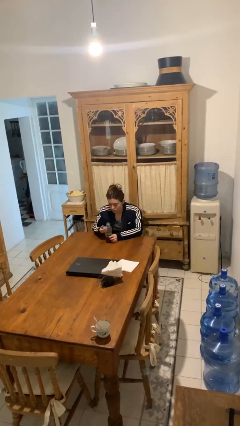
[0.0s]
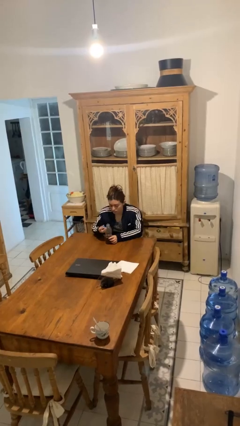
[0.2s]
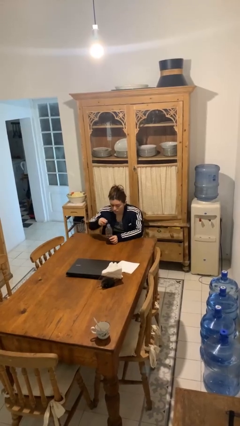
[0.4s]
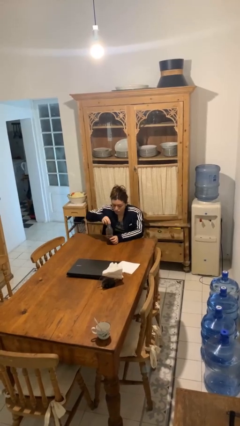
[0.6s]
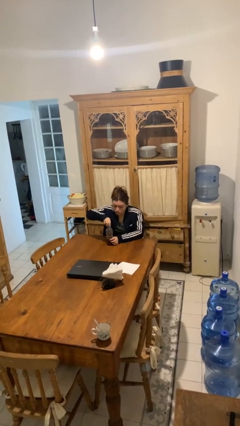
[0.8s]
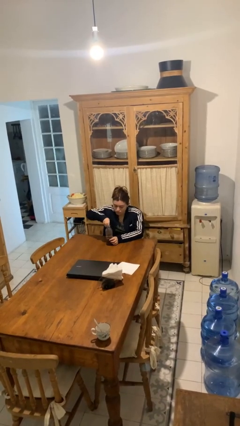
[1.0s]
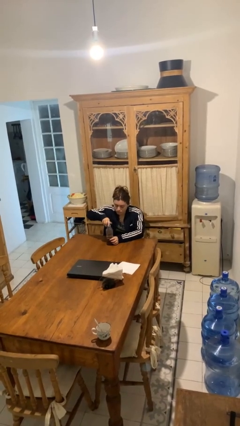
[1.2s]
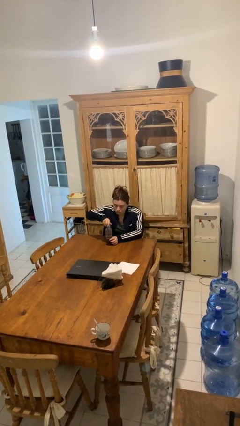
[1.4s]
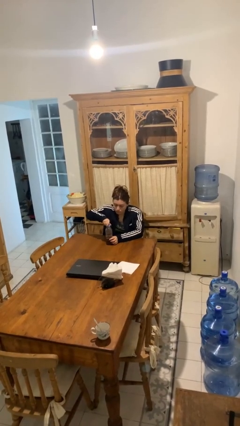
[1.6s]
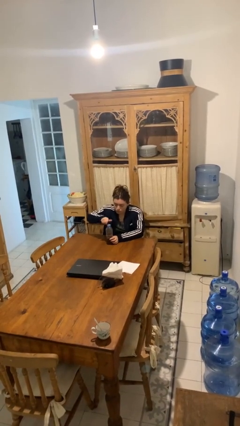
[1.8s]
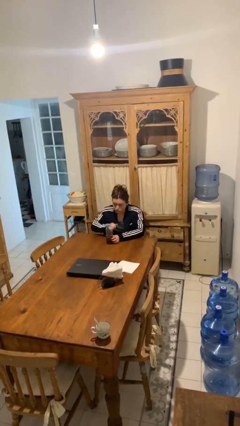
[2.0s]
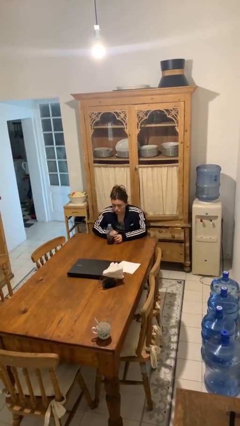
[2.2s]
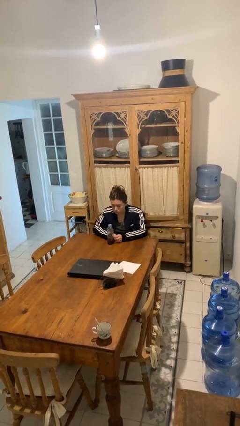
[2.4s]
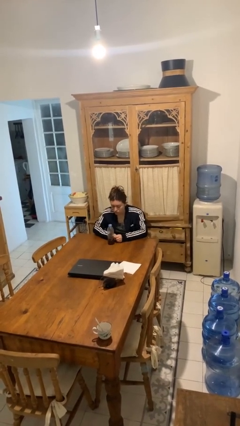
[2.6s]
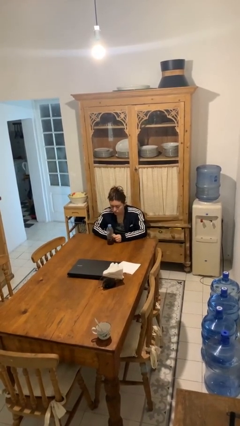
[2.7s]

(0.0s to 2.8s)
person screws lid to bottle

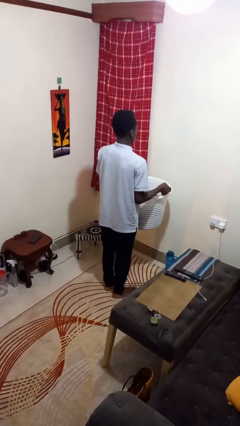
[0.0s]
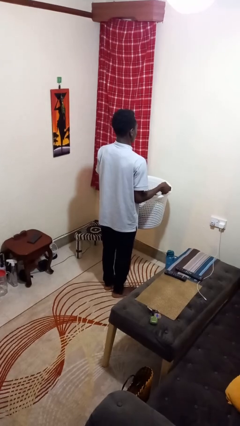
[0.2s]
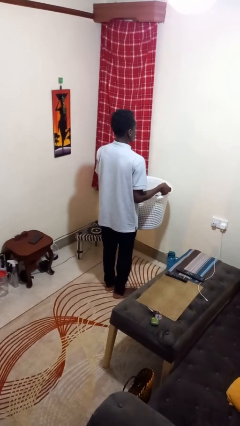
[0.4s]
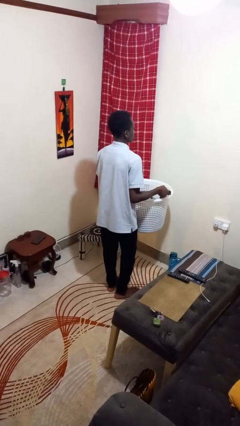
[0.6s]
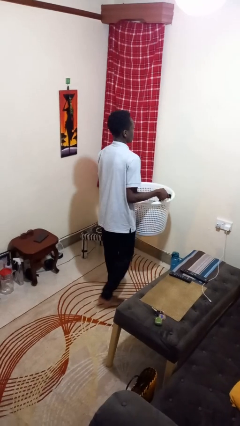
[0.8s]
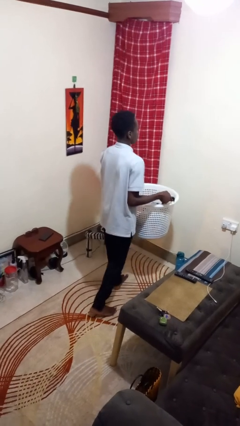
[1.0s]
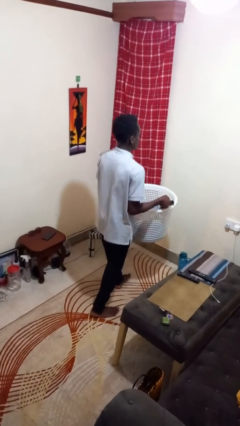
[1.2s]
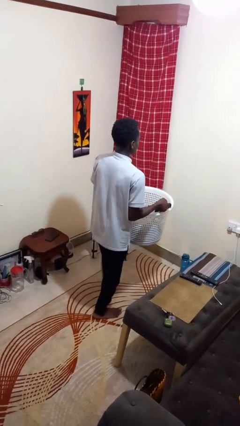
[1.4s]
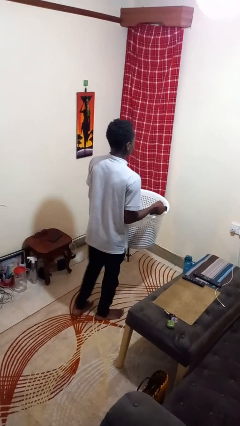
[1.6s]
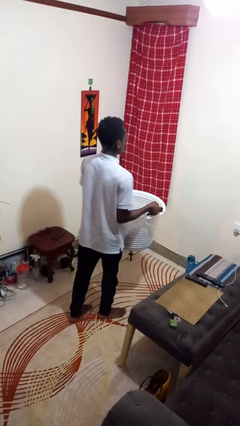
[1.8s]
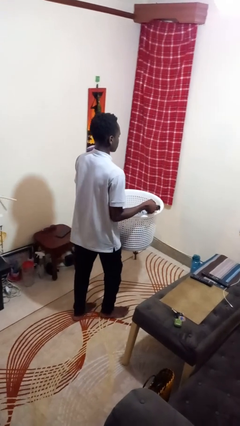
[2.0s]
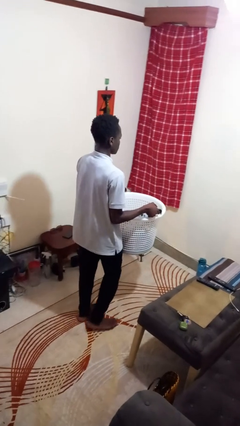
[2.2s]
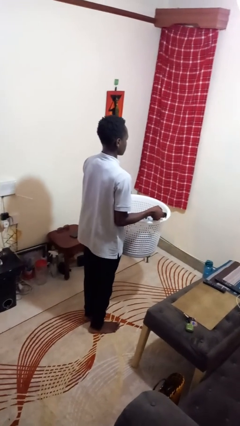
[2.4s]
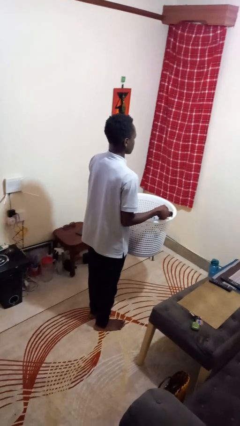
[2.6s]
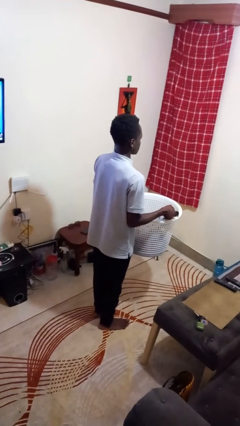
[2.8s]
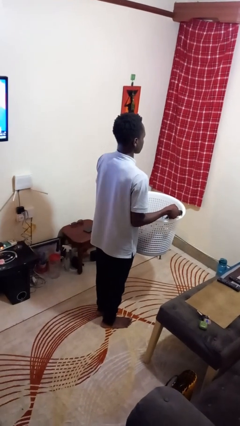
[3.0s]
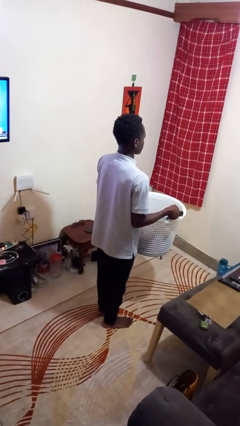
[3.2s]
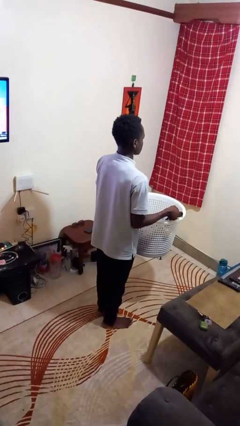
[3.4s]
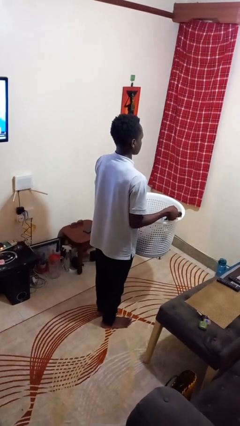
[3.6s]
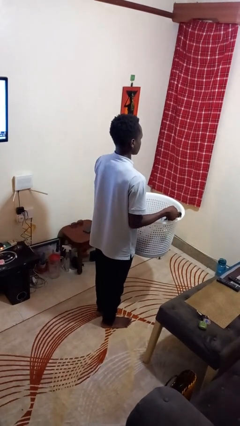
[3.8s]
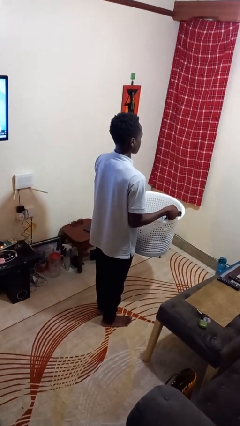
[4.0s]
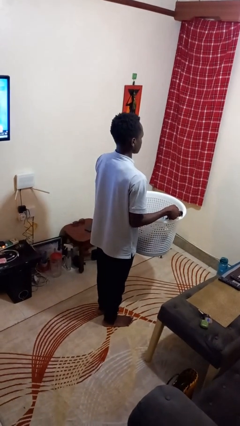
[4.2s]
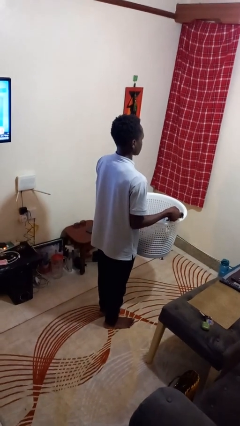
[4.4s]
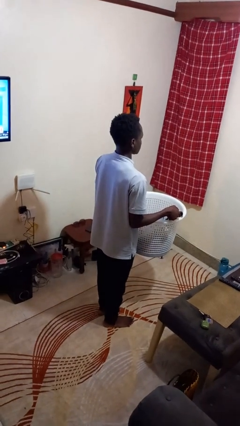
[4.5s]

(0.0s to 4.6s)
person carries laundry basket

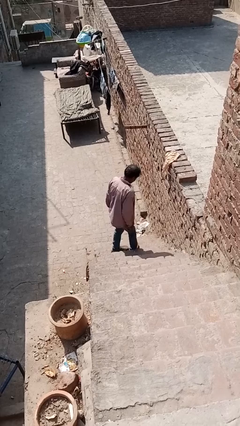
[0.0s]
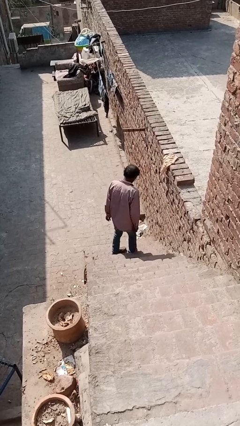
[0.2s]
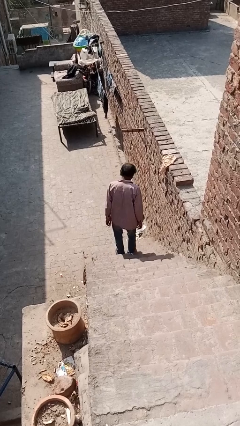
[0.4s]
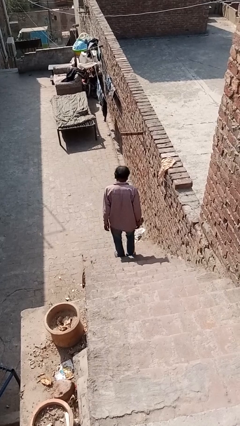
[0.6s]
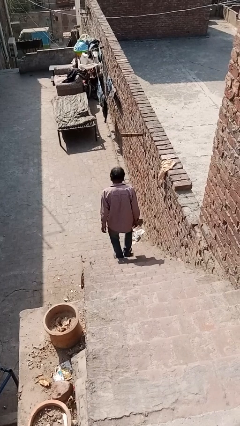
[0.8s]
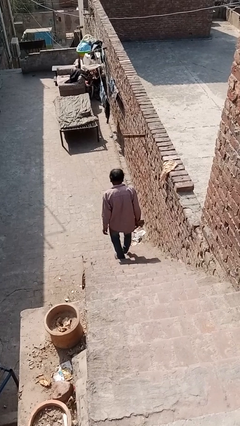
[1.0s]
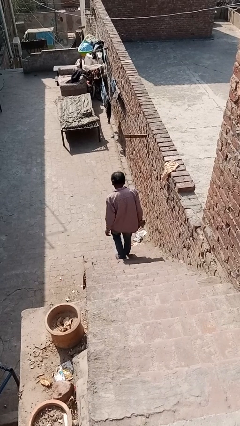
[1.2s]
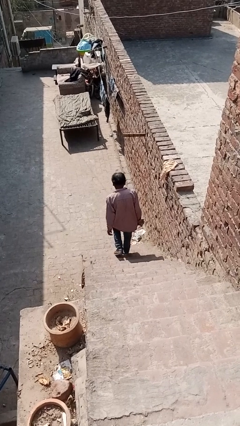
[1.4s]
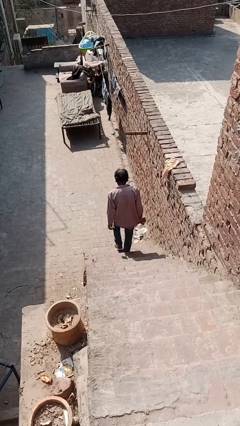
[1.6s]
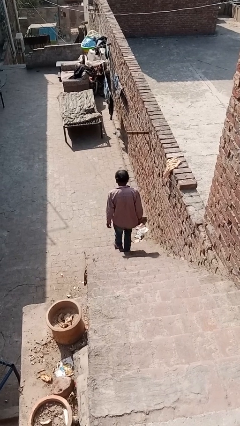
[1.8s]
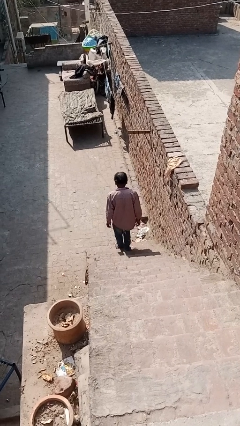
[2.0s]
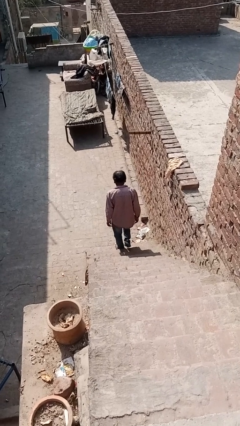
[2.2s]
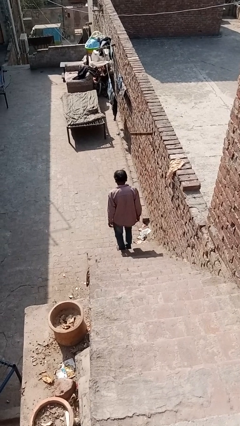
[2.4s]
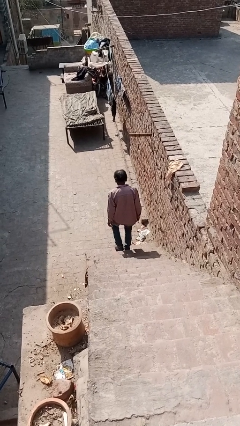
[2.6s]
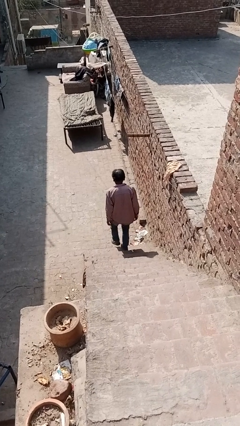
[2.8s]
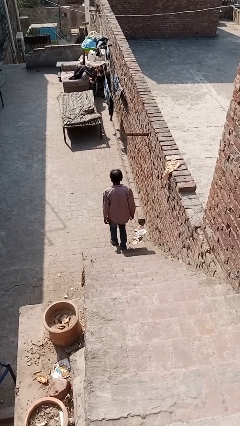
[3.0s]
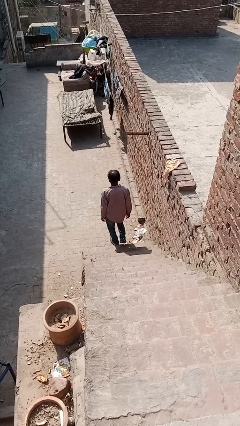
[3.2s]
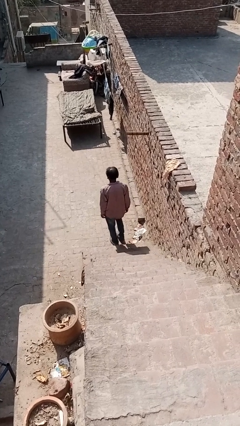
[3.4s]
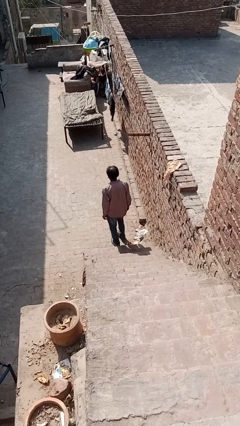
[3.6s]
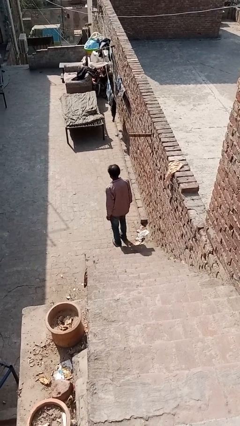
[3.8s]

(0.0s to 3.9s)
person climbs down stairs

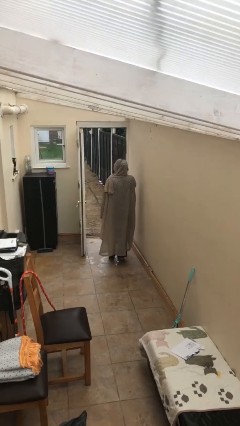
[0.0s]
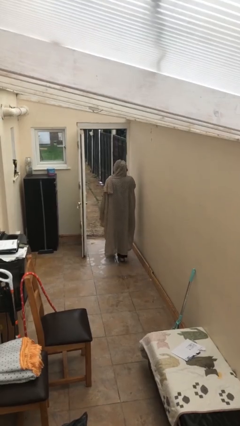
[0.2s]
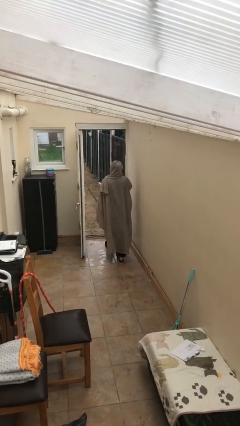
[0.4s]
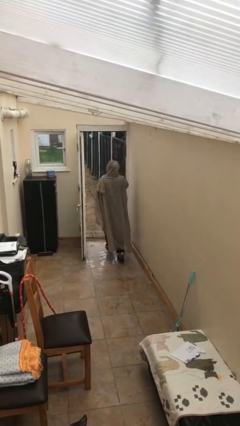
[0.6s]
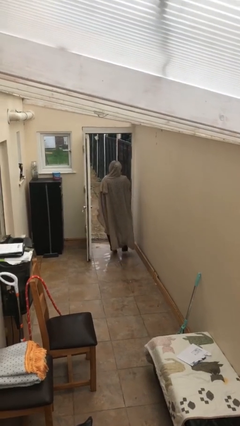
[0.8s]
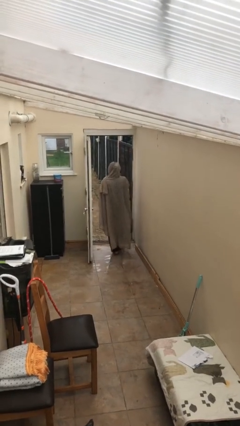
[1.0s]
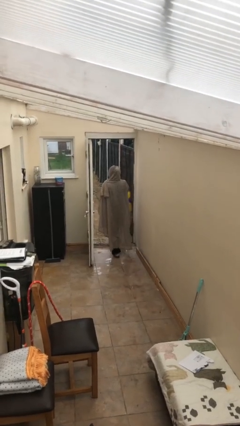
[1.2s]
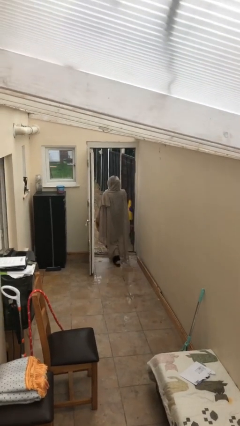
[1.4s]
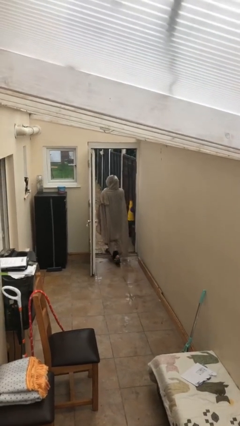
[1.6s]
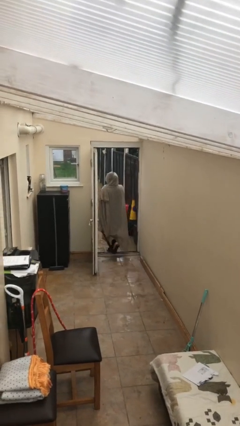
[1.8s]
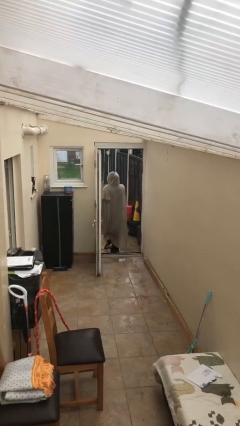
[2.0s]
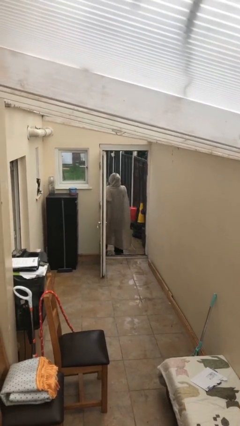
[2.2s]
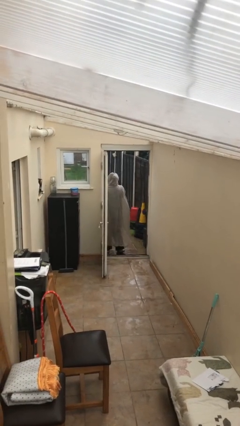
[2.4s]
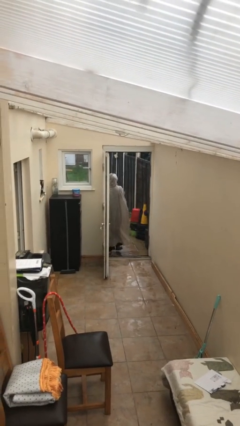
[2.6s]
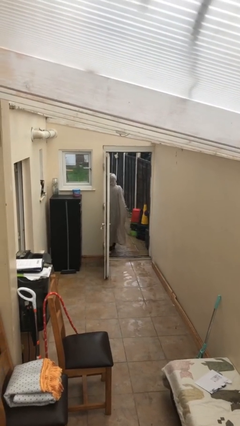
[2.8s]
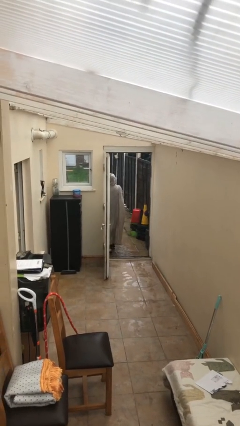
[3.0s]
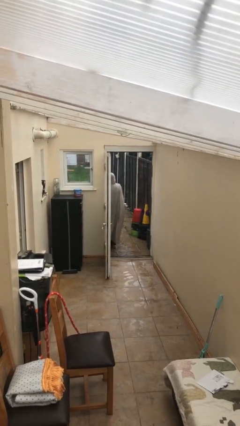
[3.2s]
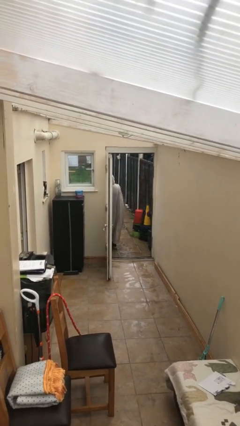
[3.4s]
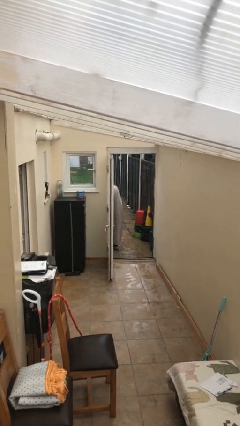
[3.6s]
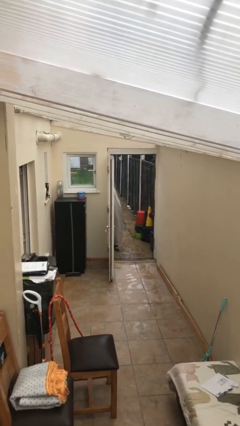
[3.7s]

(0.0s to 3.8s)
person exits scene through structure

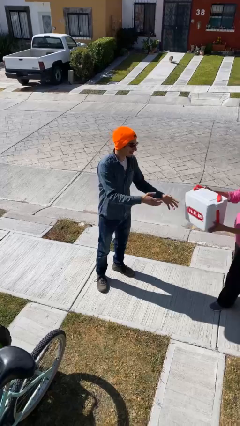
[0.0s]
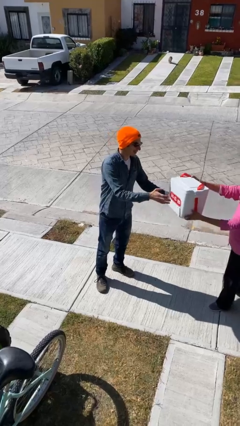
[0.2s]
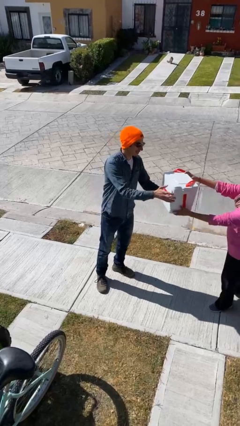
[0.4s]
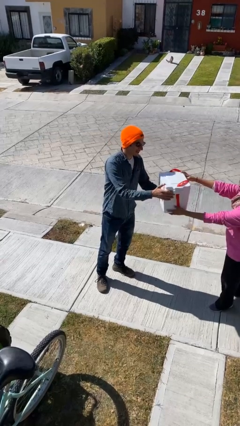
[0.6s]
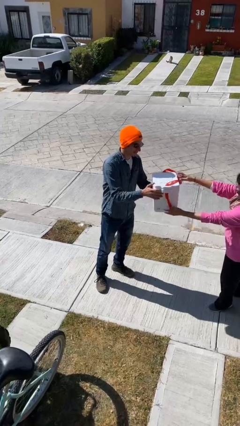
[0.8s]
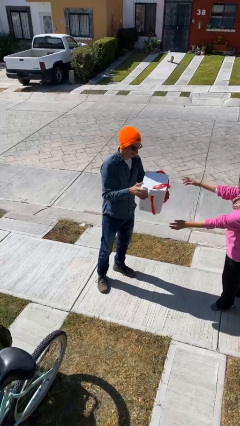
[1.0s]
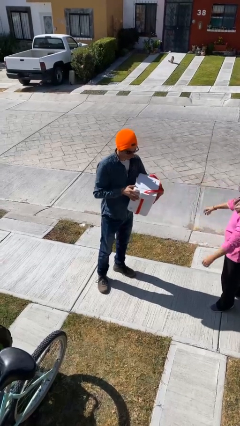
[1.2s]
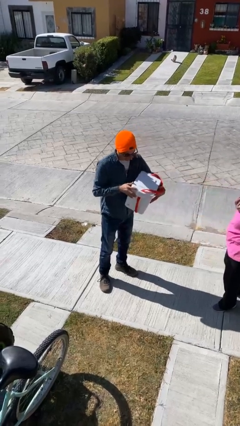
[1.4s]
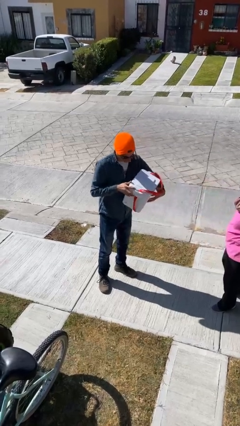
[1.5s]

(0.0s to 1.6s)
person transfers object to person

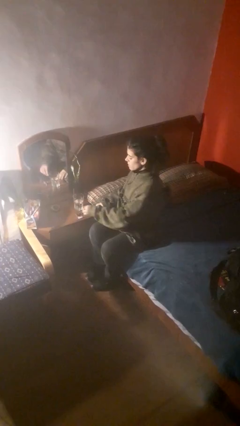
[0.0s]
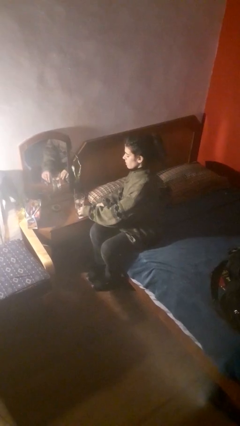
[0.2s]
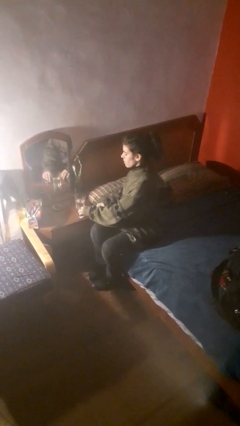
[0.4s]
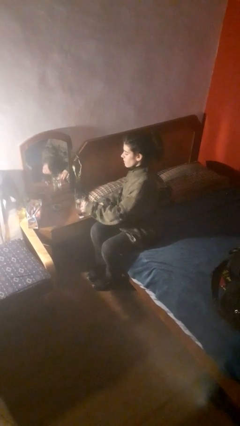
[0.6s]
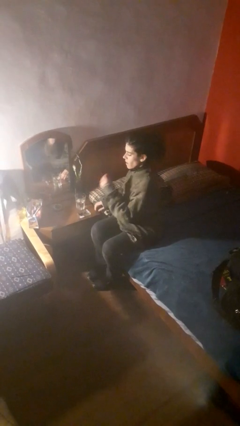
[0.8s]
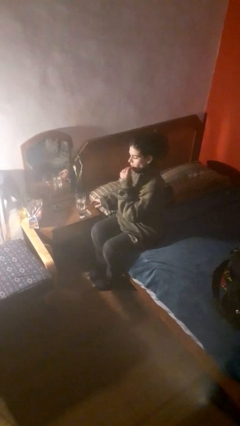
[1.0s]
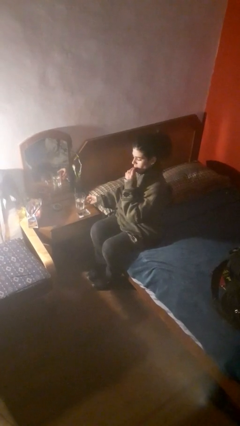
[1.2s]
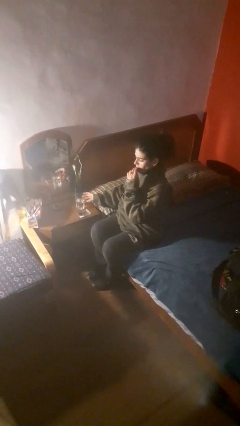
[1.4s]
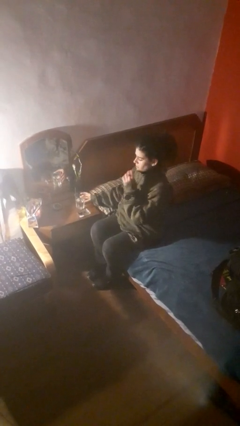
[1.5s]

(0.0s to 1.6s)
person takes medicine pills
